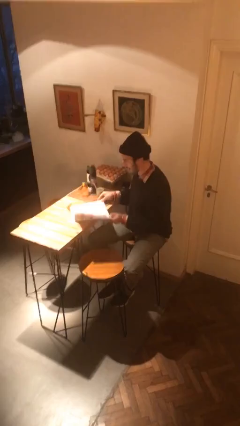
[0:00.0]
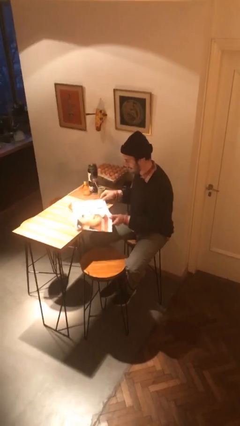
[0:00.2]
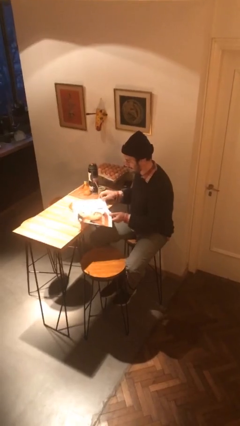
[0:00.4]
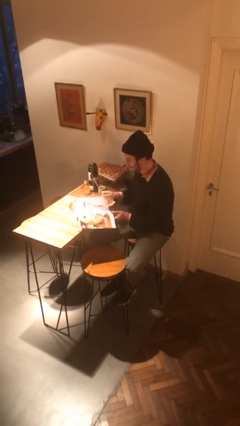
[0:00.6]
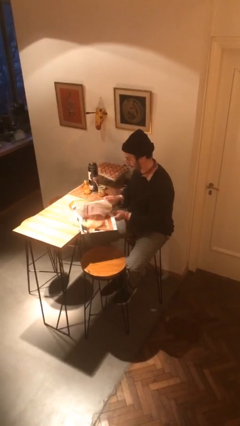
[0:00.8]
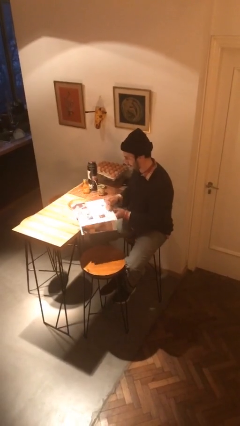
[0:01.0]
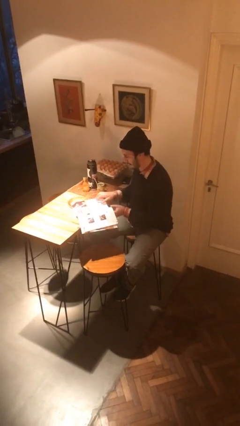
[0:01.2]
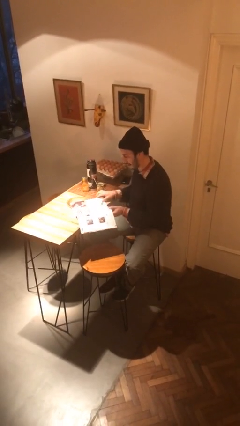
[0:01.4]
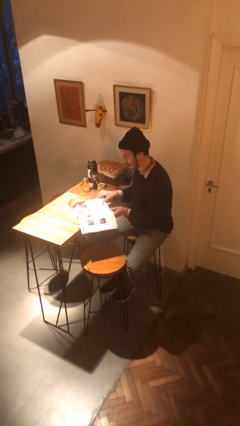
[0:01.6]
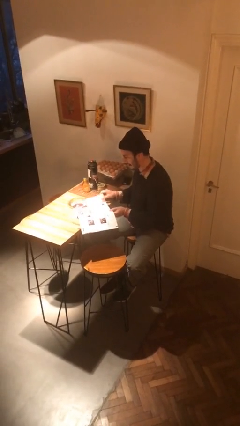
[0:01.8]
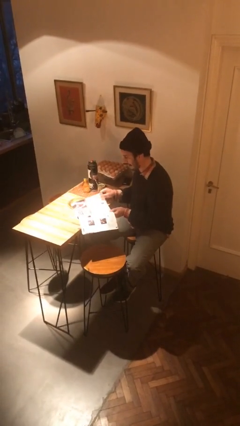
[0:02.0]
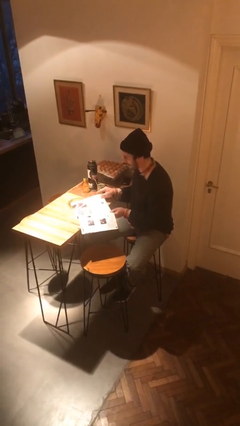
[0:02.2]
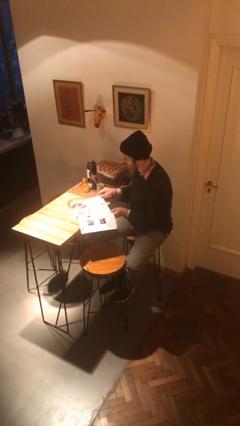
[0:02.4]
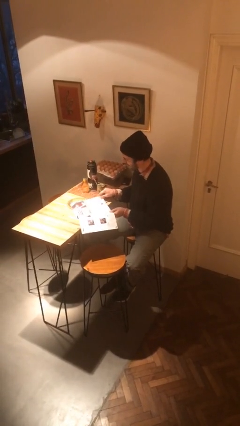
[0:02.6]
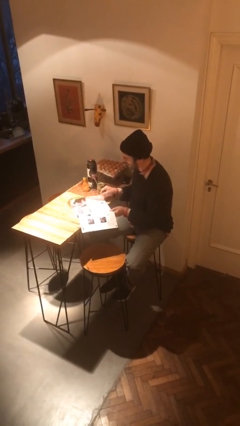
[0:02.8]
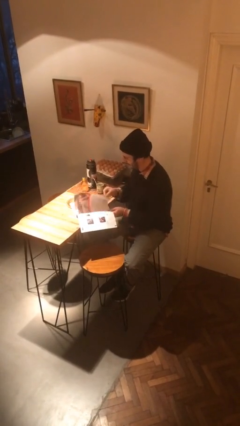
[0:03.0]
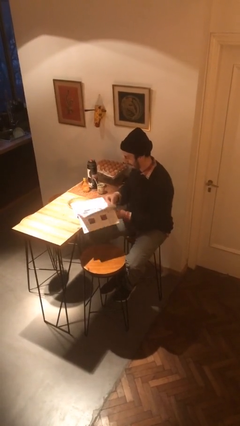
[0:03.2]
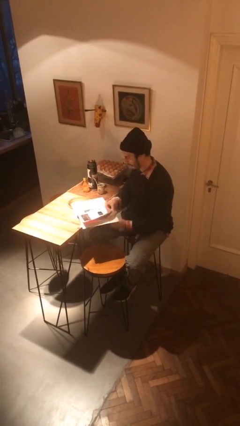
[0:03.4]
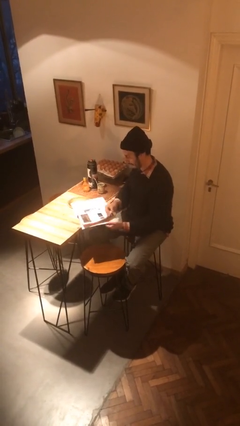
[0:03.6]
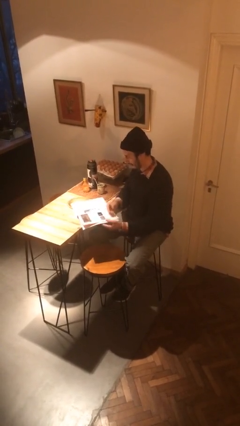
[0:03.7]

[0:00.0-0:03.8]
person reads magazine

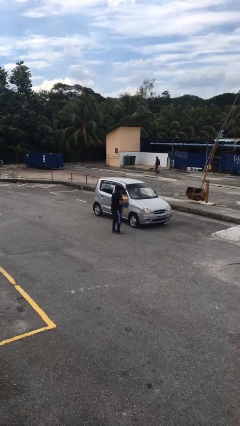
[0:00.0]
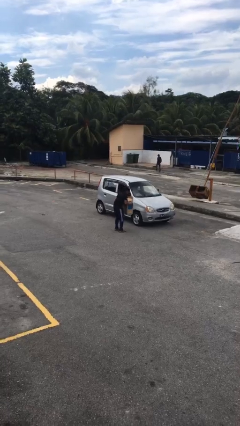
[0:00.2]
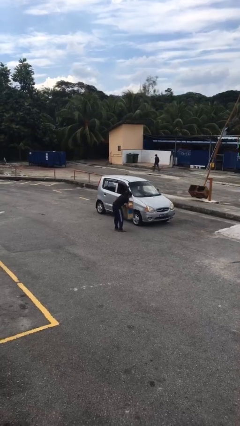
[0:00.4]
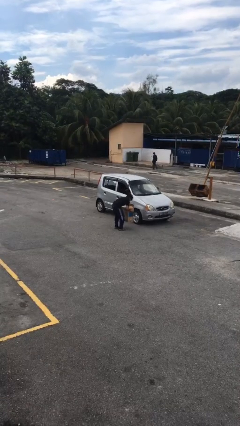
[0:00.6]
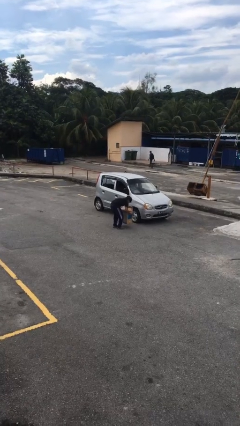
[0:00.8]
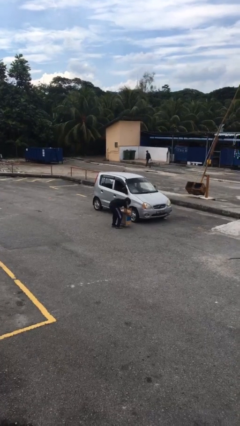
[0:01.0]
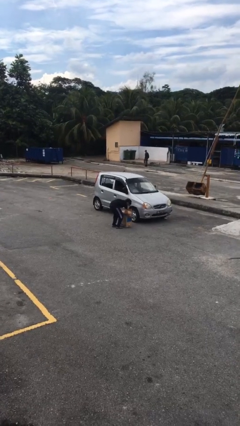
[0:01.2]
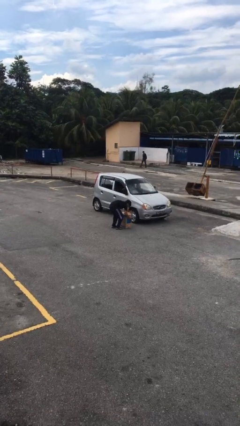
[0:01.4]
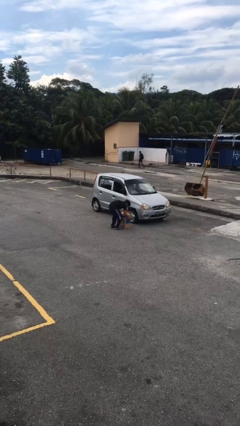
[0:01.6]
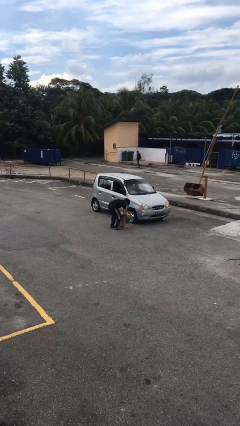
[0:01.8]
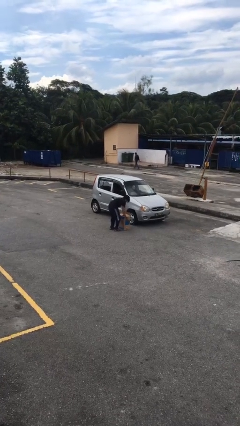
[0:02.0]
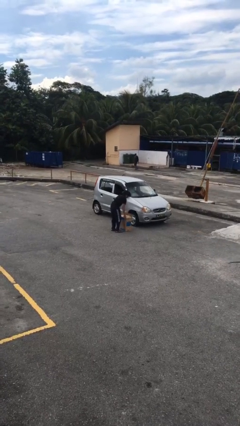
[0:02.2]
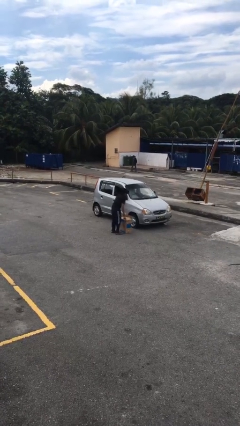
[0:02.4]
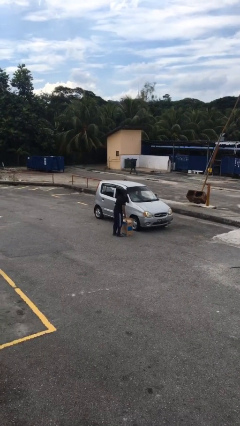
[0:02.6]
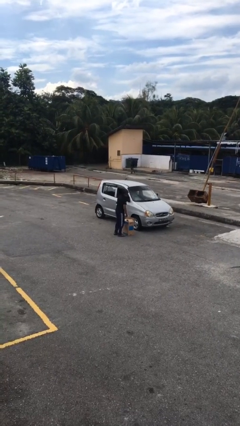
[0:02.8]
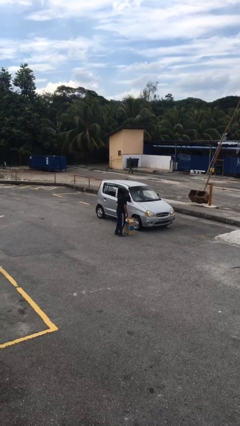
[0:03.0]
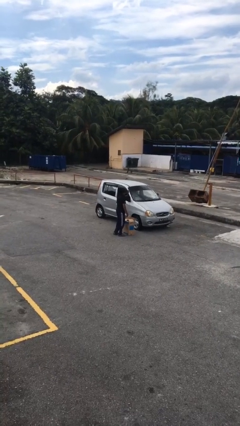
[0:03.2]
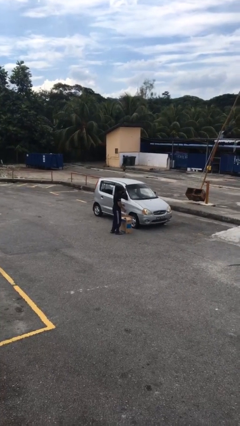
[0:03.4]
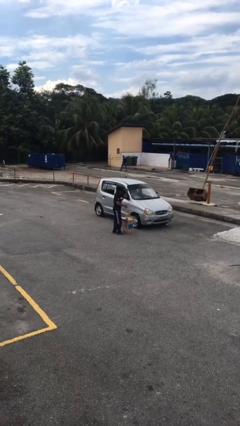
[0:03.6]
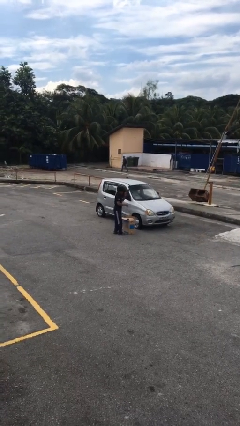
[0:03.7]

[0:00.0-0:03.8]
person puts down object on floor

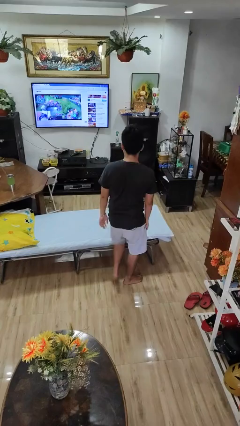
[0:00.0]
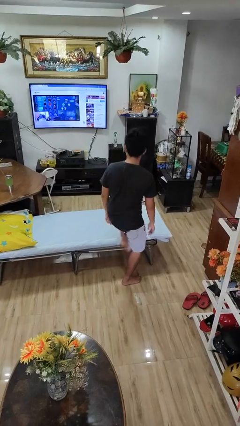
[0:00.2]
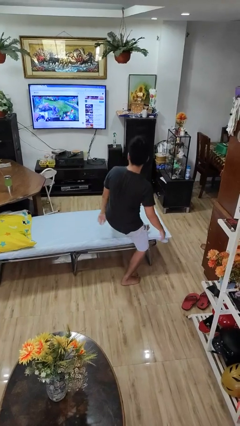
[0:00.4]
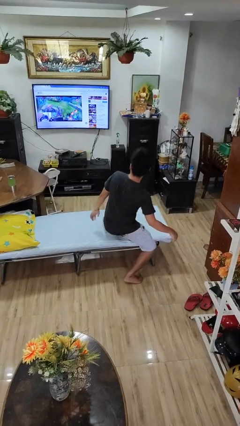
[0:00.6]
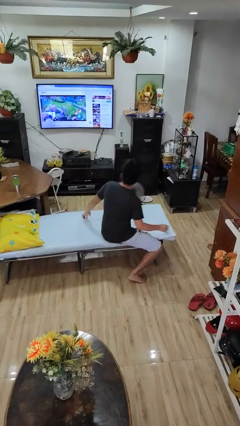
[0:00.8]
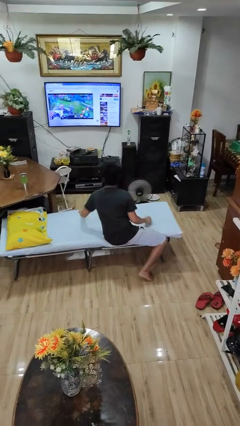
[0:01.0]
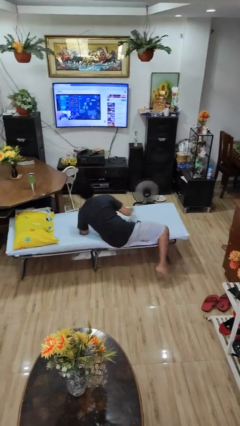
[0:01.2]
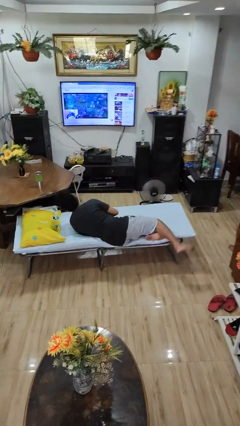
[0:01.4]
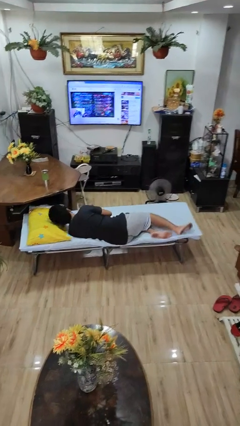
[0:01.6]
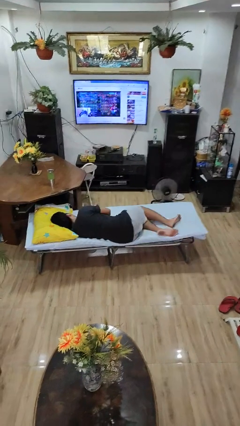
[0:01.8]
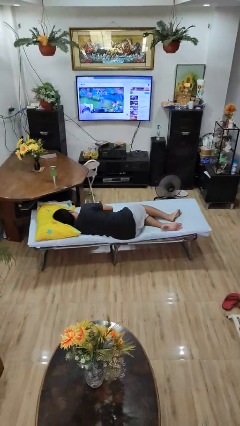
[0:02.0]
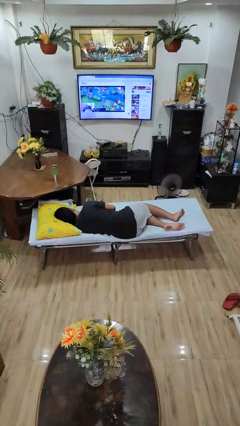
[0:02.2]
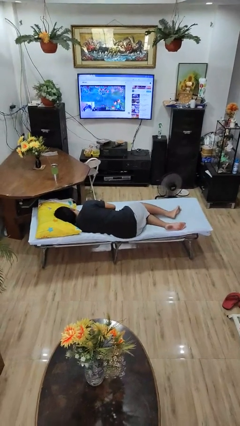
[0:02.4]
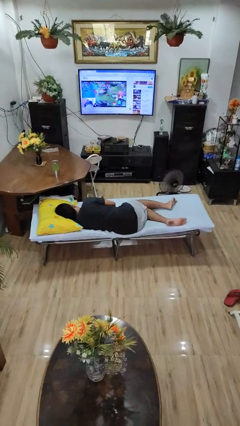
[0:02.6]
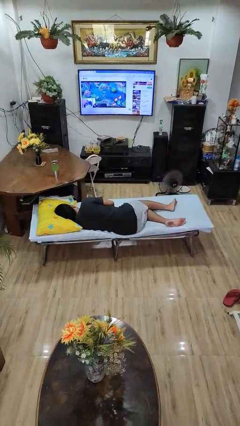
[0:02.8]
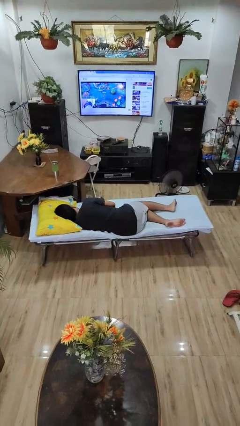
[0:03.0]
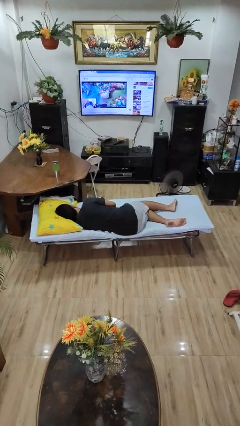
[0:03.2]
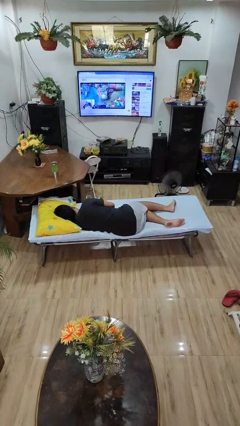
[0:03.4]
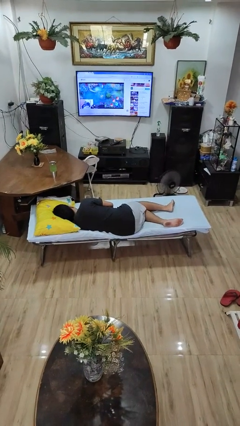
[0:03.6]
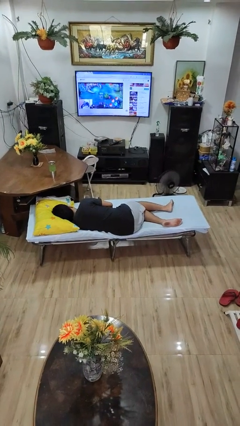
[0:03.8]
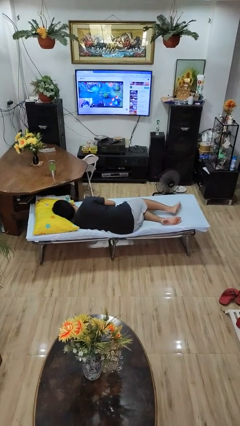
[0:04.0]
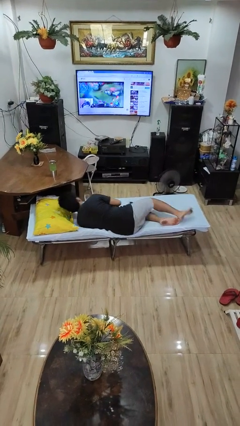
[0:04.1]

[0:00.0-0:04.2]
person lies down on bed

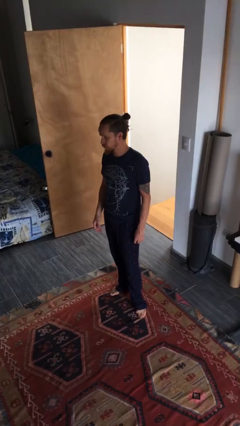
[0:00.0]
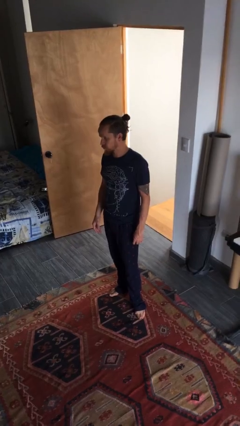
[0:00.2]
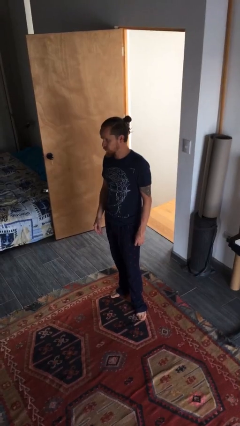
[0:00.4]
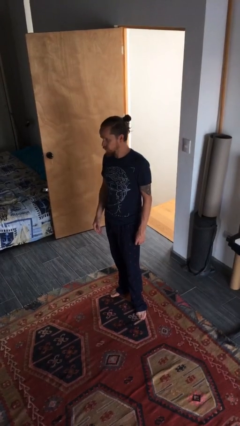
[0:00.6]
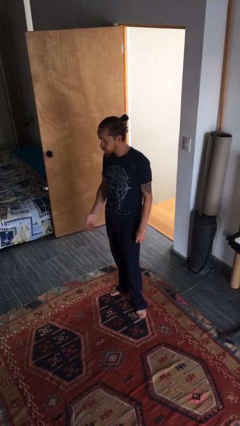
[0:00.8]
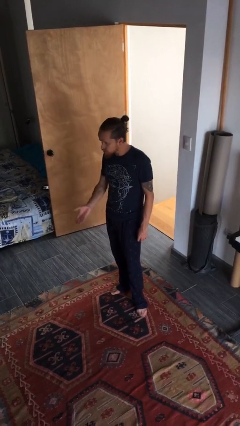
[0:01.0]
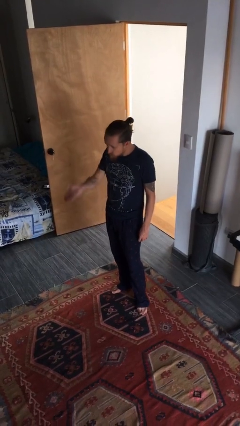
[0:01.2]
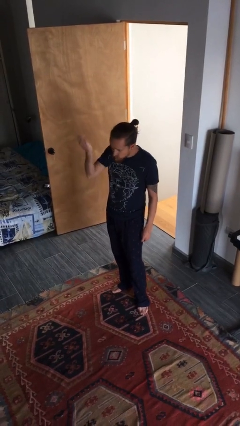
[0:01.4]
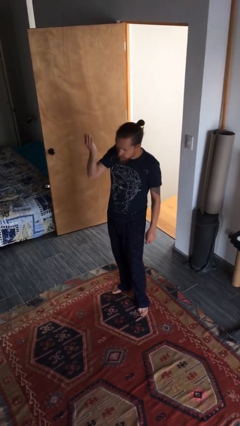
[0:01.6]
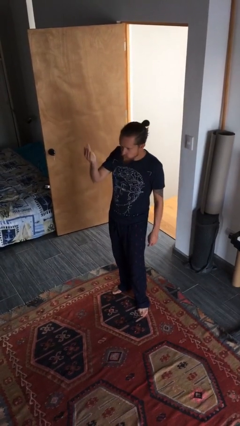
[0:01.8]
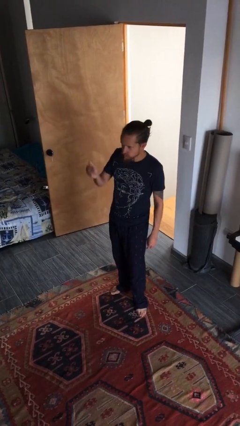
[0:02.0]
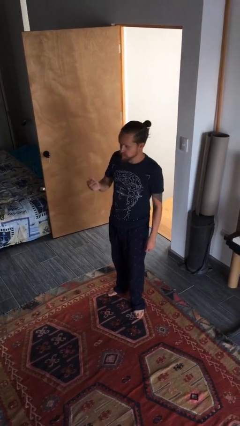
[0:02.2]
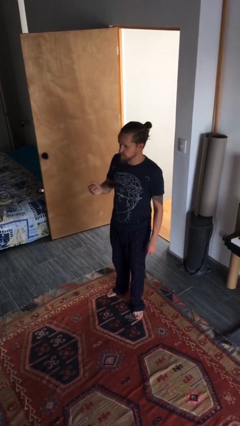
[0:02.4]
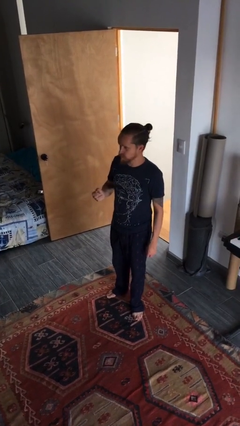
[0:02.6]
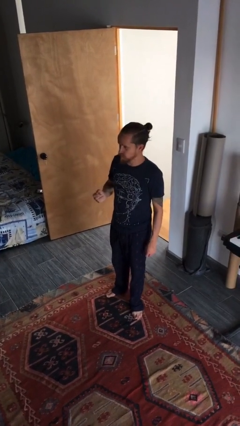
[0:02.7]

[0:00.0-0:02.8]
person gestures swipe up

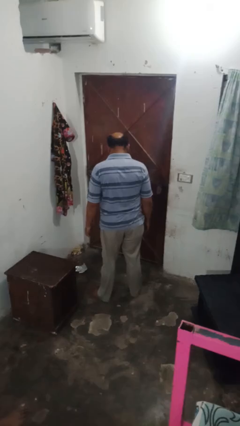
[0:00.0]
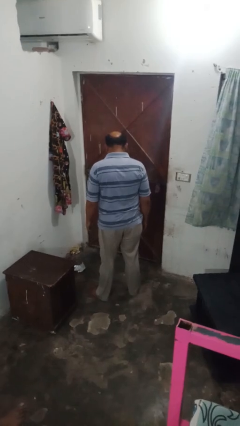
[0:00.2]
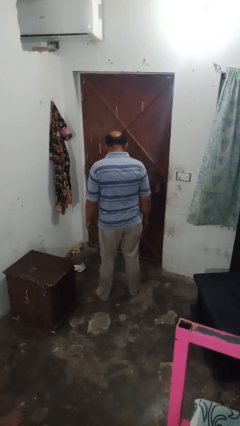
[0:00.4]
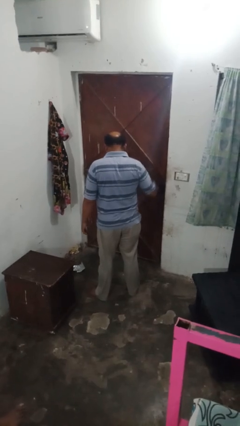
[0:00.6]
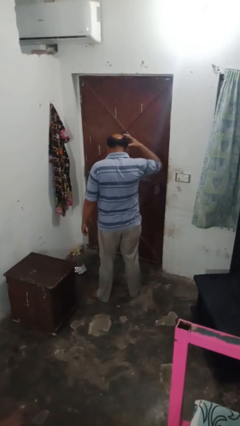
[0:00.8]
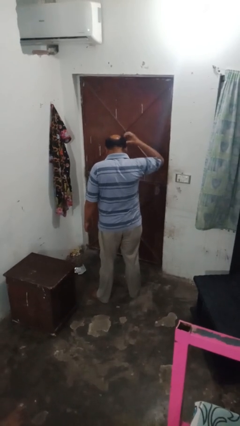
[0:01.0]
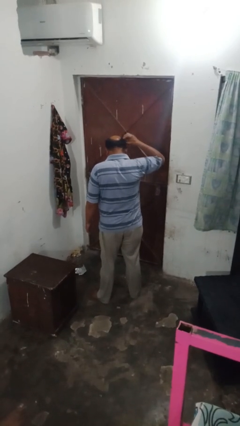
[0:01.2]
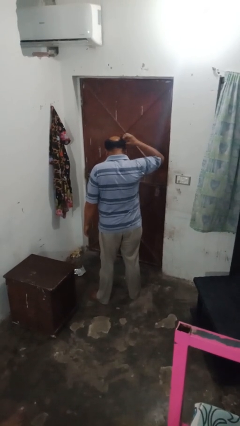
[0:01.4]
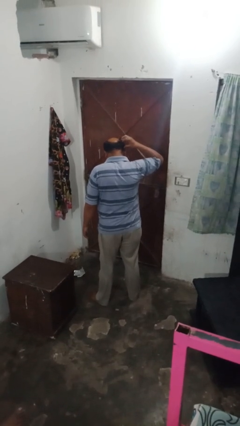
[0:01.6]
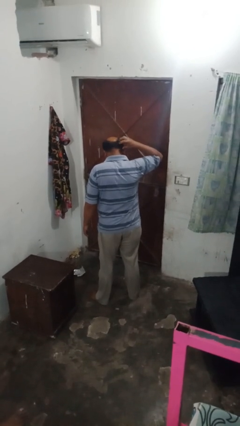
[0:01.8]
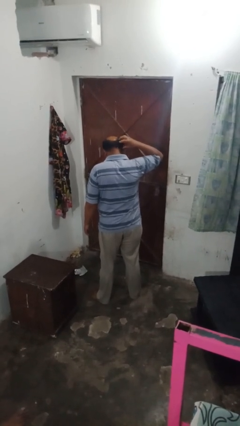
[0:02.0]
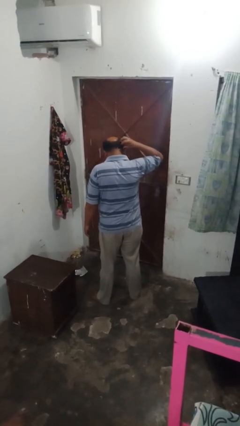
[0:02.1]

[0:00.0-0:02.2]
person strokes hair

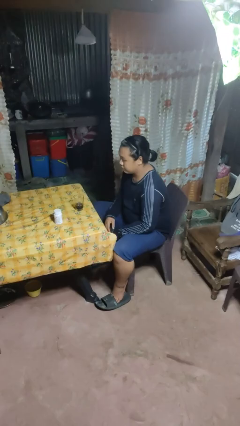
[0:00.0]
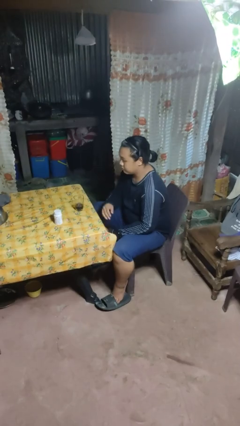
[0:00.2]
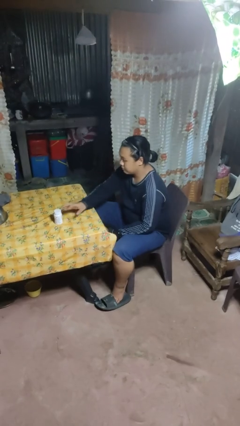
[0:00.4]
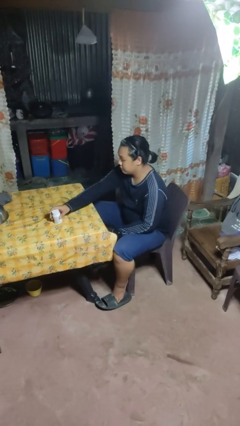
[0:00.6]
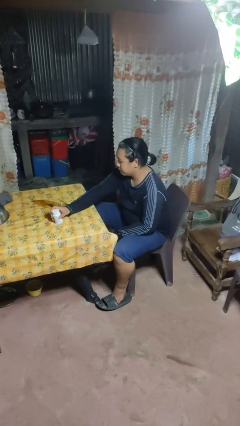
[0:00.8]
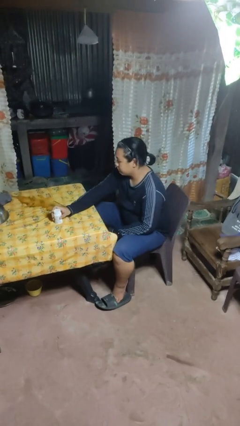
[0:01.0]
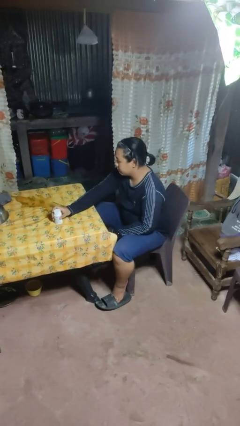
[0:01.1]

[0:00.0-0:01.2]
person spills on table
